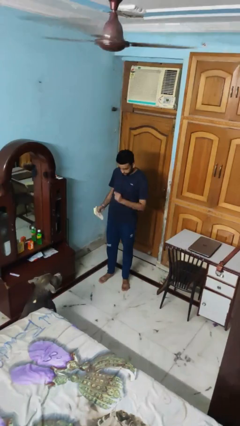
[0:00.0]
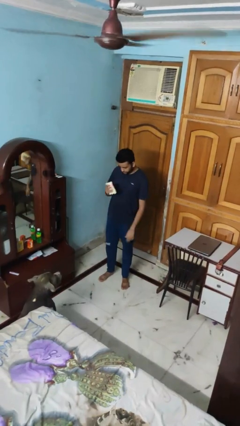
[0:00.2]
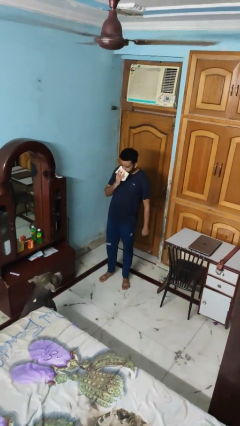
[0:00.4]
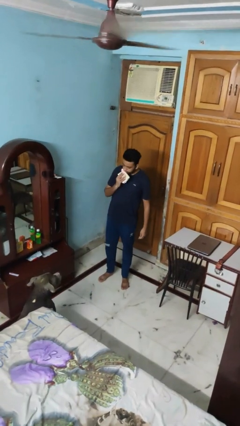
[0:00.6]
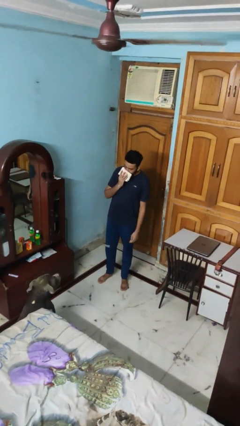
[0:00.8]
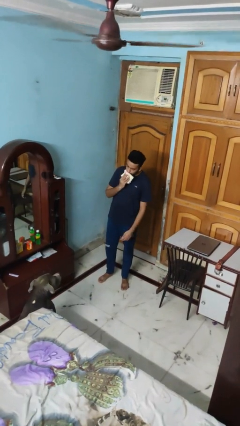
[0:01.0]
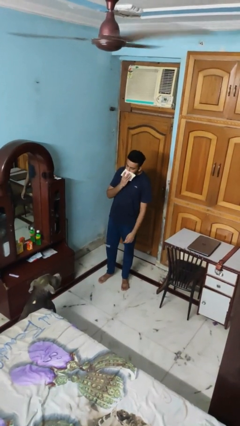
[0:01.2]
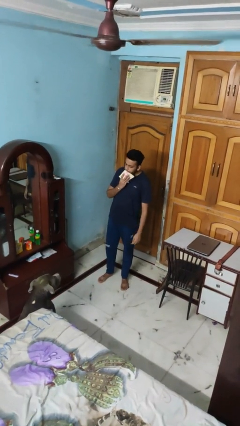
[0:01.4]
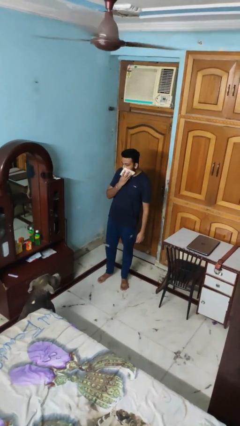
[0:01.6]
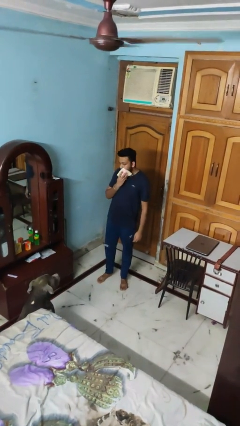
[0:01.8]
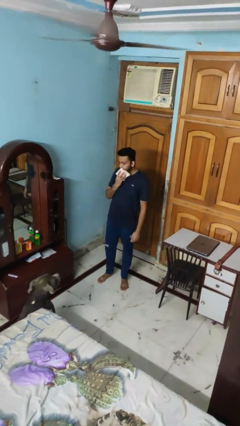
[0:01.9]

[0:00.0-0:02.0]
person wipes mouth with napkin

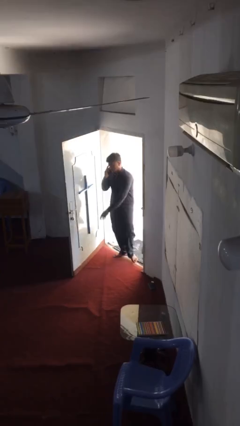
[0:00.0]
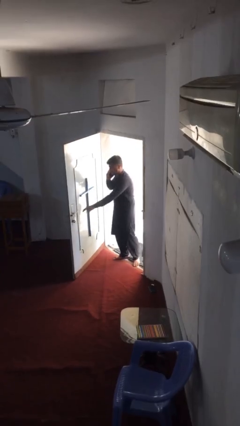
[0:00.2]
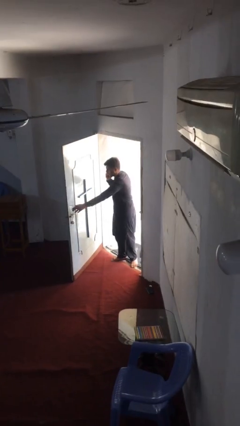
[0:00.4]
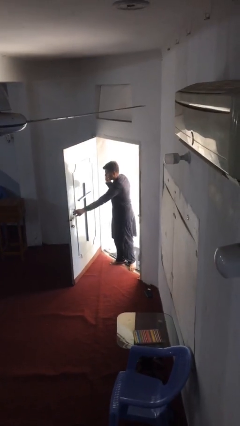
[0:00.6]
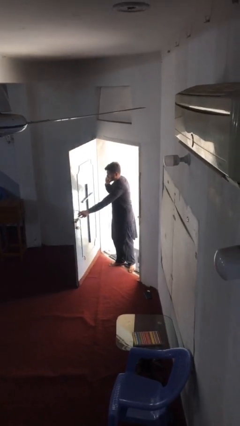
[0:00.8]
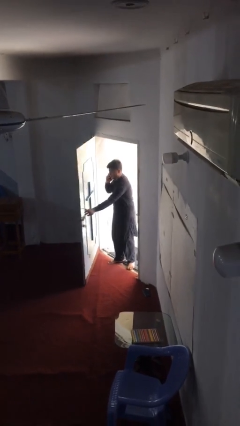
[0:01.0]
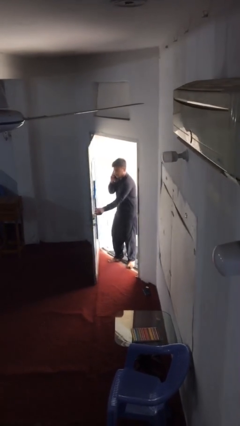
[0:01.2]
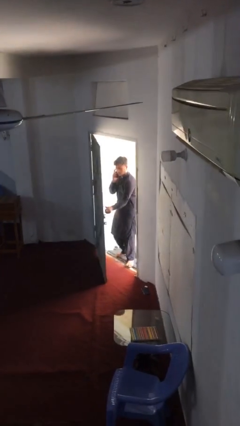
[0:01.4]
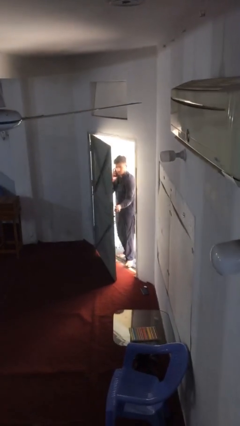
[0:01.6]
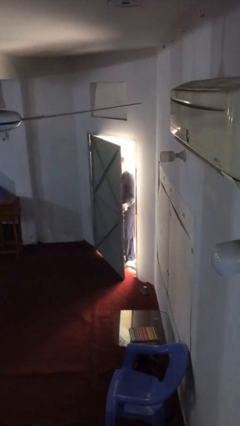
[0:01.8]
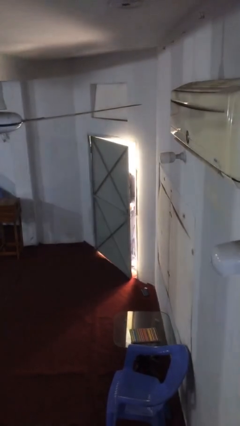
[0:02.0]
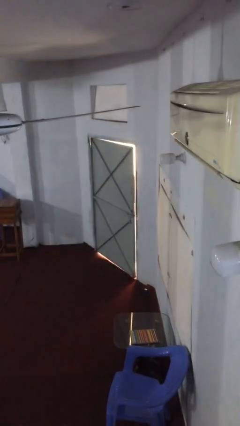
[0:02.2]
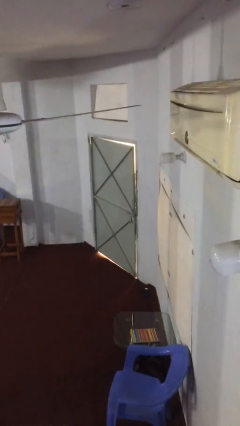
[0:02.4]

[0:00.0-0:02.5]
person closes facility door

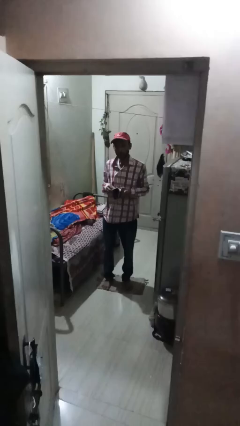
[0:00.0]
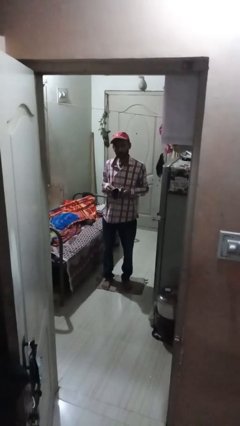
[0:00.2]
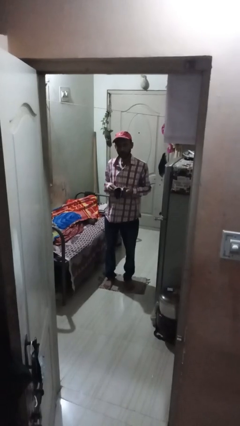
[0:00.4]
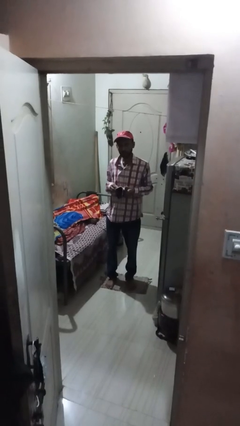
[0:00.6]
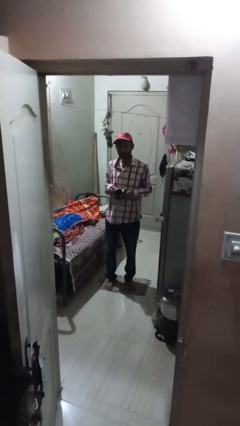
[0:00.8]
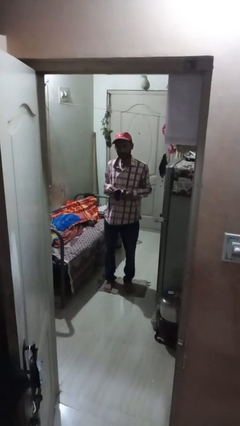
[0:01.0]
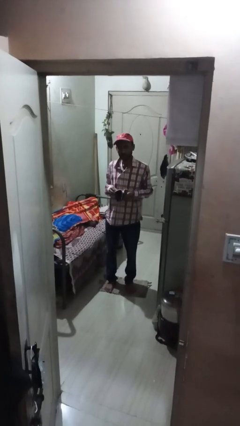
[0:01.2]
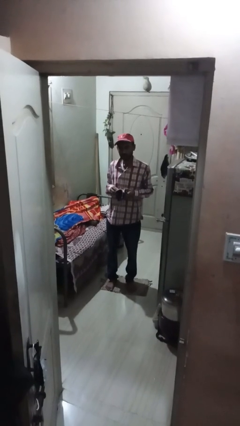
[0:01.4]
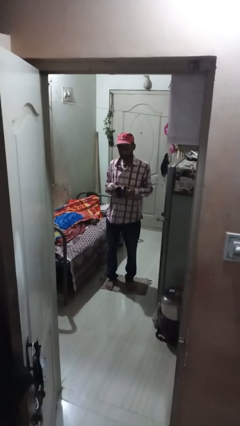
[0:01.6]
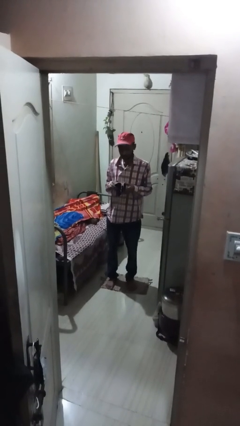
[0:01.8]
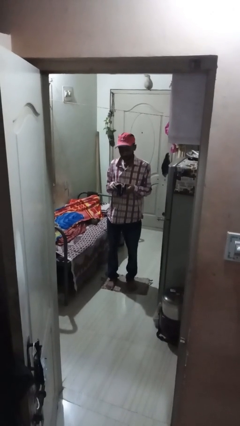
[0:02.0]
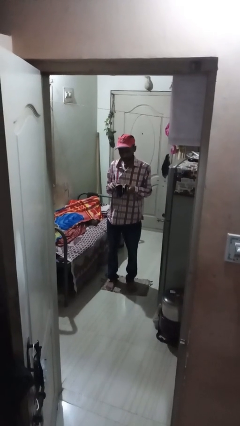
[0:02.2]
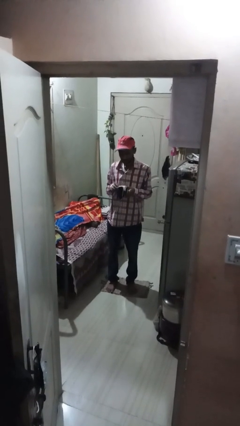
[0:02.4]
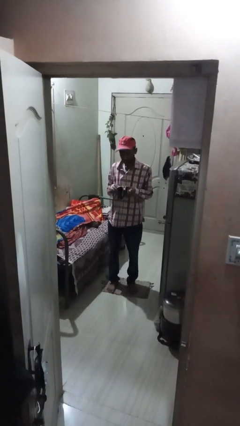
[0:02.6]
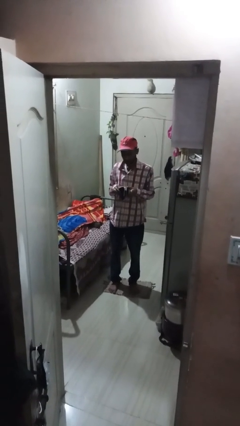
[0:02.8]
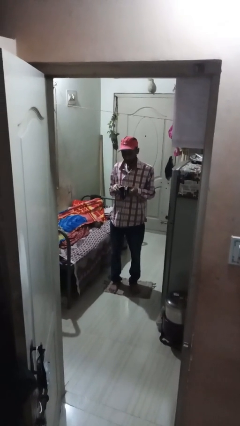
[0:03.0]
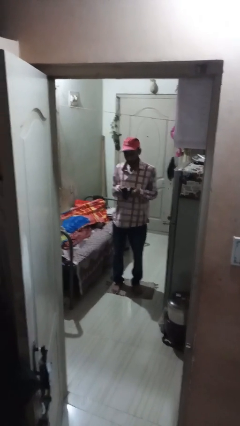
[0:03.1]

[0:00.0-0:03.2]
person searches in purse

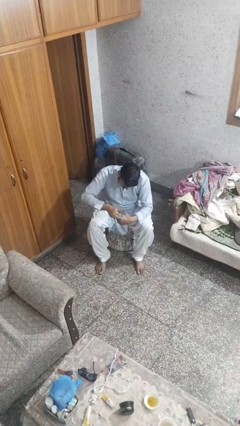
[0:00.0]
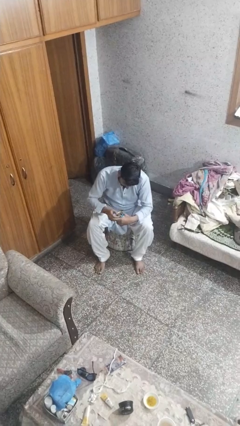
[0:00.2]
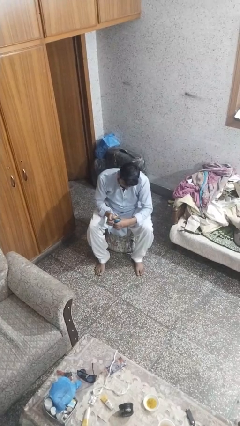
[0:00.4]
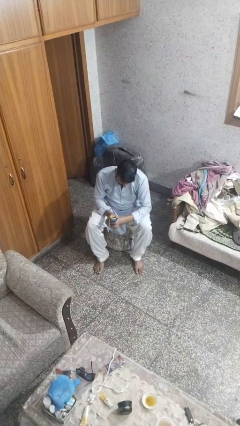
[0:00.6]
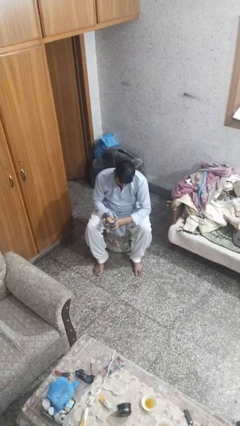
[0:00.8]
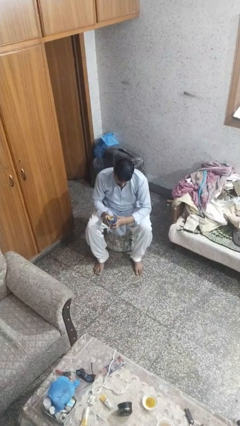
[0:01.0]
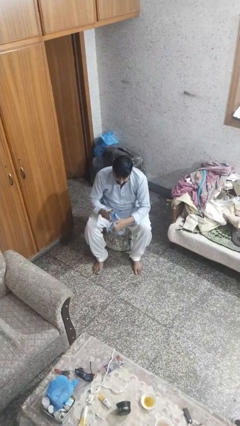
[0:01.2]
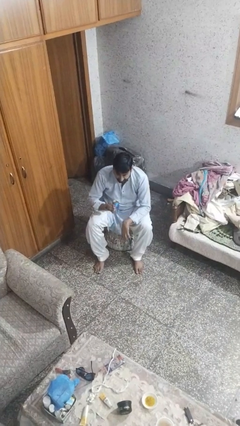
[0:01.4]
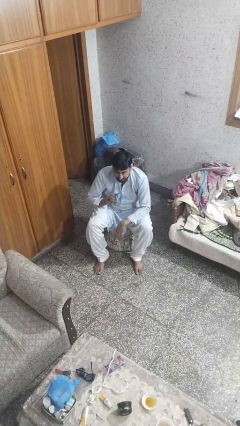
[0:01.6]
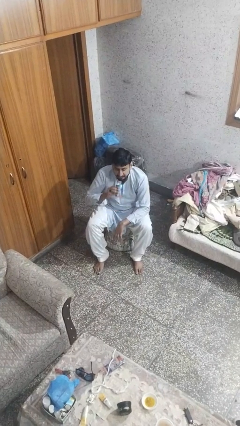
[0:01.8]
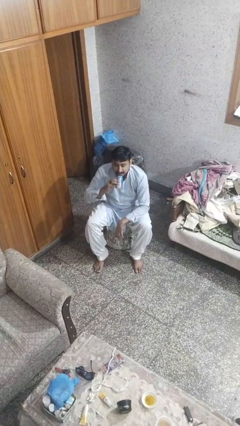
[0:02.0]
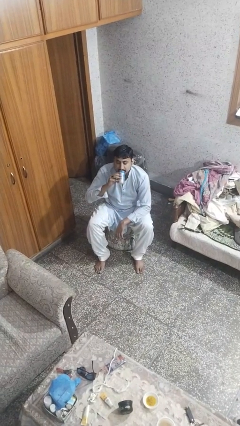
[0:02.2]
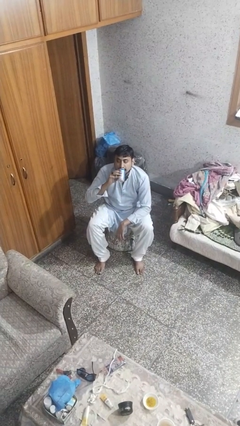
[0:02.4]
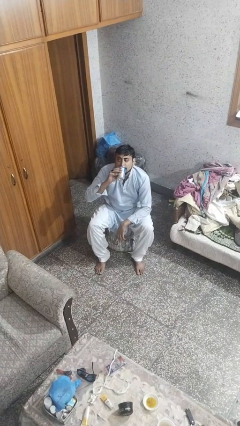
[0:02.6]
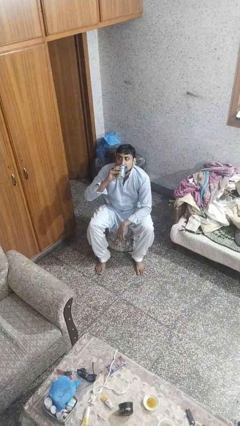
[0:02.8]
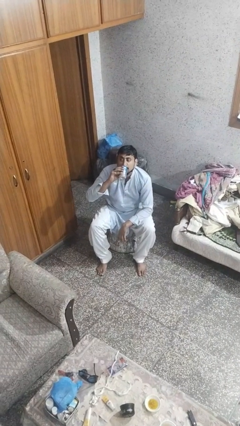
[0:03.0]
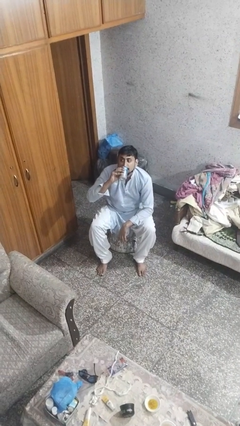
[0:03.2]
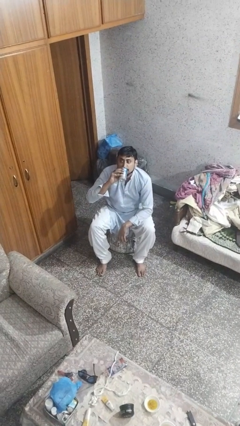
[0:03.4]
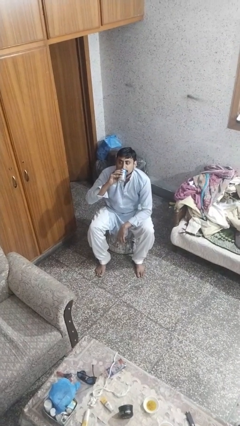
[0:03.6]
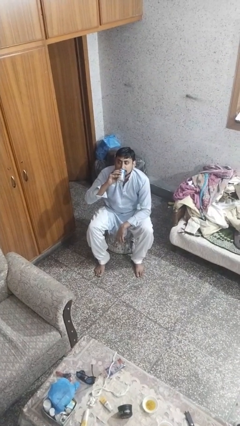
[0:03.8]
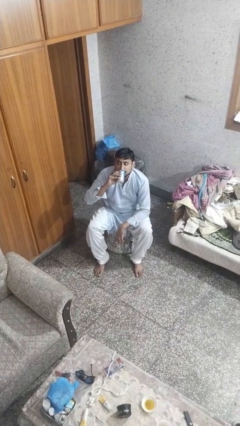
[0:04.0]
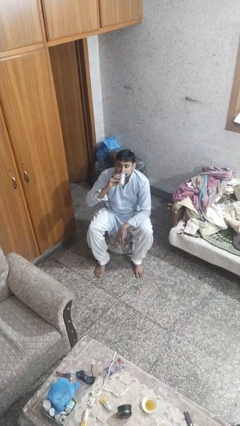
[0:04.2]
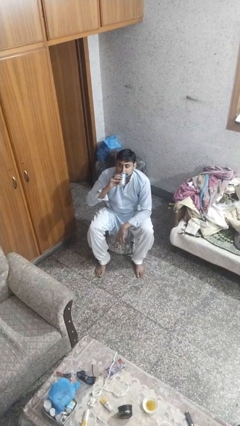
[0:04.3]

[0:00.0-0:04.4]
person drinks from beverage can

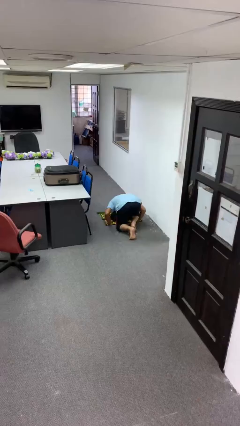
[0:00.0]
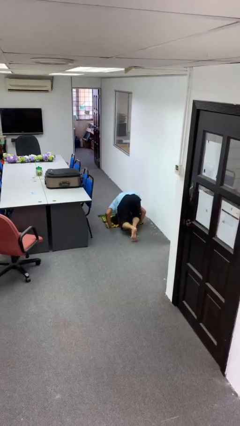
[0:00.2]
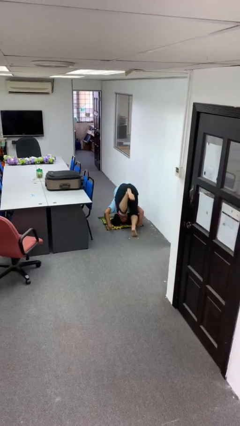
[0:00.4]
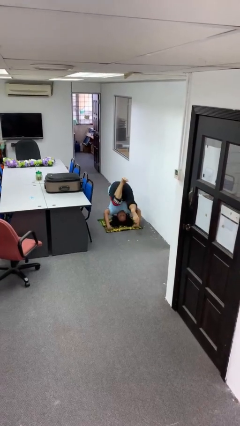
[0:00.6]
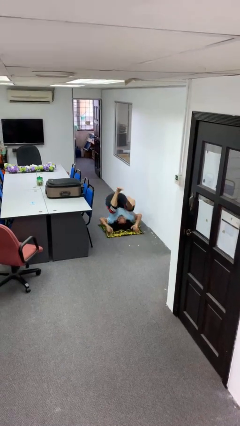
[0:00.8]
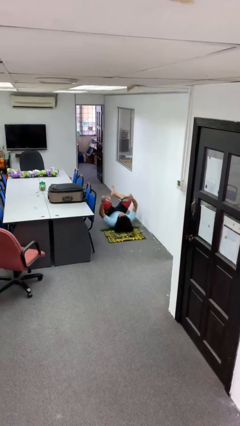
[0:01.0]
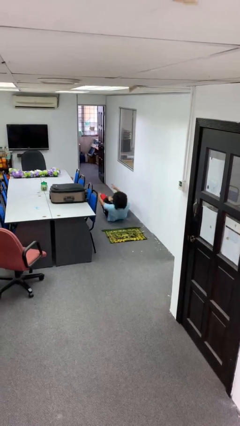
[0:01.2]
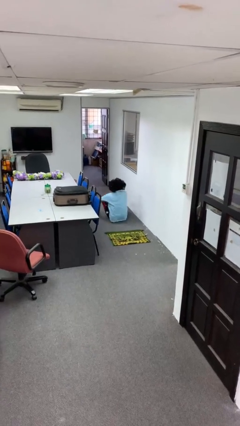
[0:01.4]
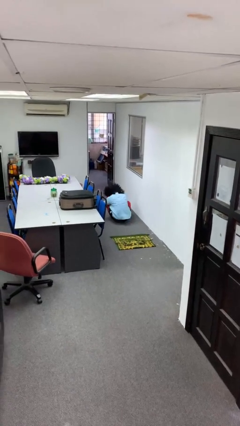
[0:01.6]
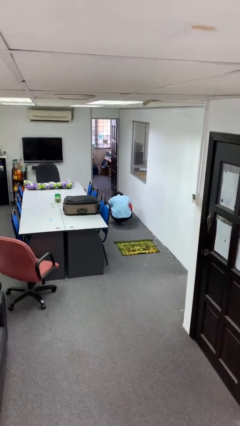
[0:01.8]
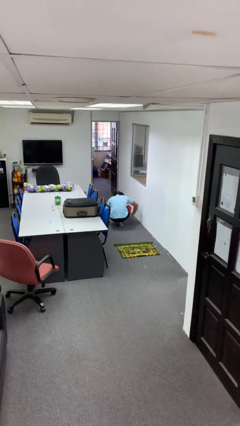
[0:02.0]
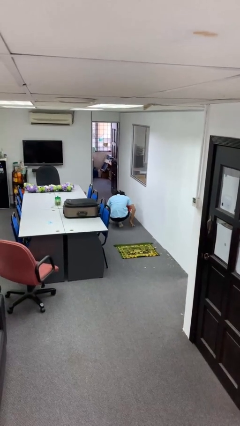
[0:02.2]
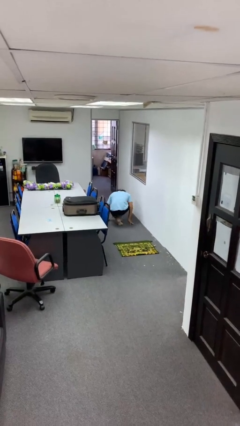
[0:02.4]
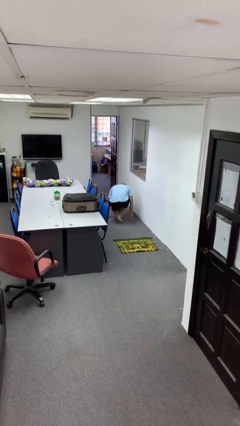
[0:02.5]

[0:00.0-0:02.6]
person somersaults

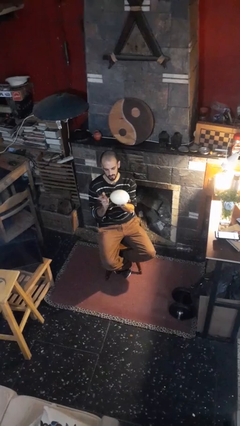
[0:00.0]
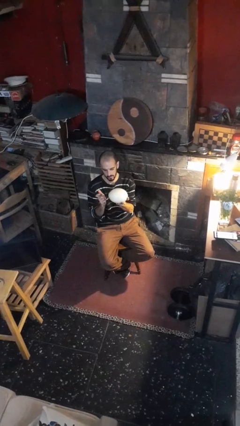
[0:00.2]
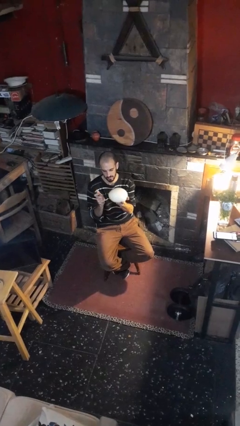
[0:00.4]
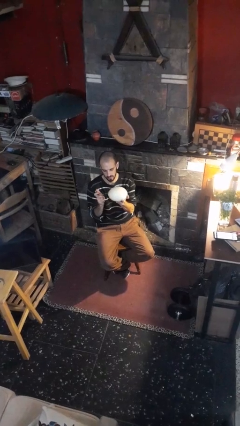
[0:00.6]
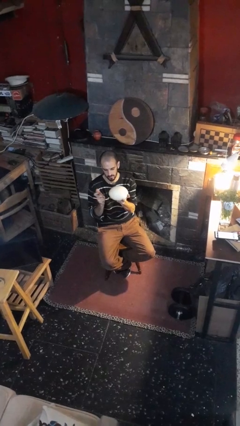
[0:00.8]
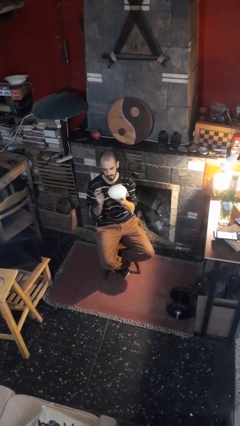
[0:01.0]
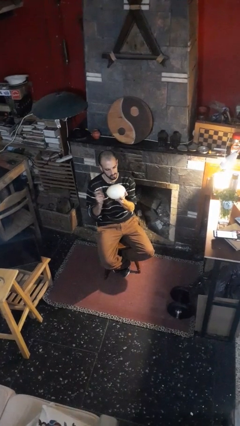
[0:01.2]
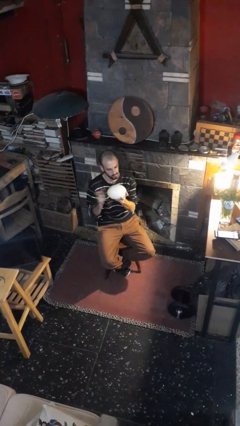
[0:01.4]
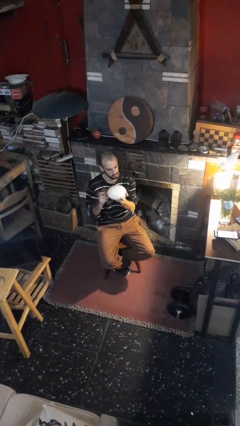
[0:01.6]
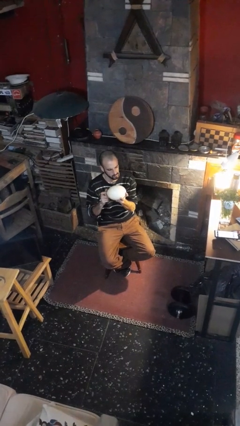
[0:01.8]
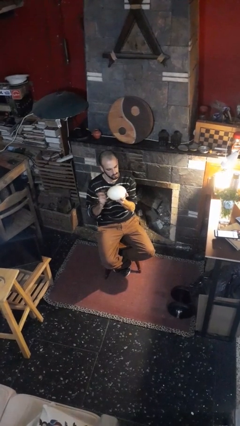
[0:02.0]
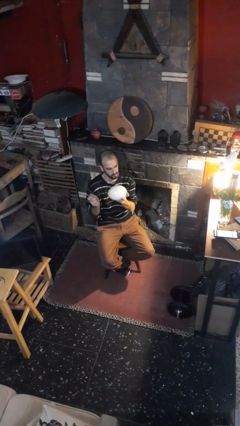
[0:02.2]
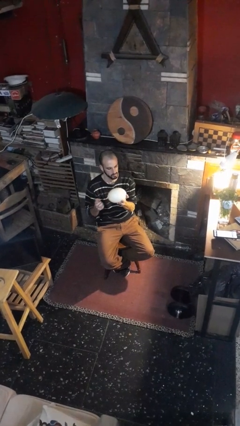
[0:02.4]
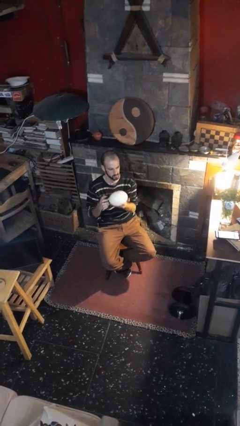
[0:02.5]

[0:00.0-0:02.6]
person taps object with finger
